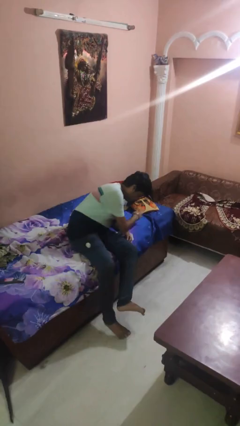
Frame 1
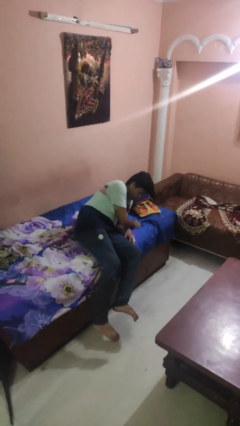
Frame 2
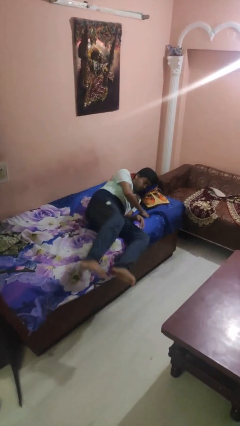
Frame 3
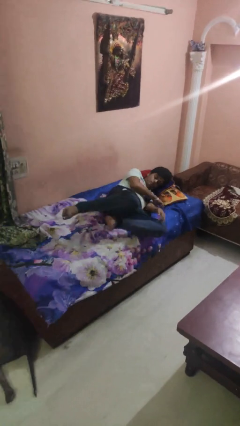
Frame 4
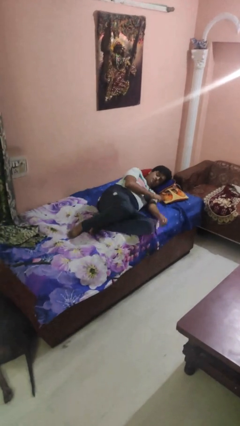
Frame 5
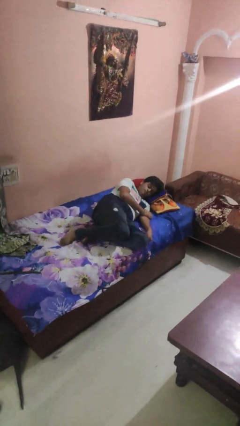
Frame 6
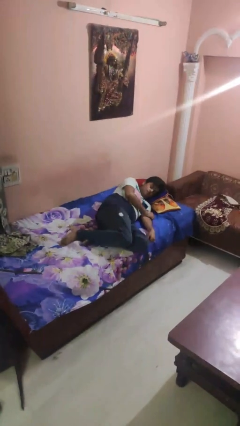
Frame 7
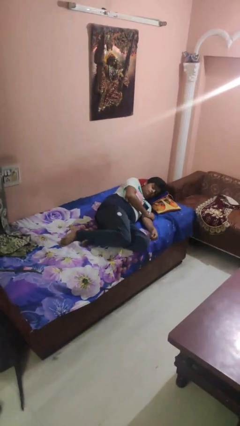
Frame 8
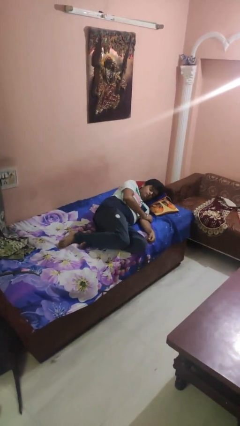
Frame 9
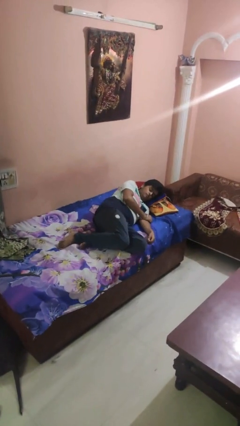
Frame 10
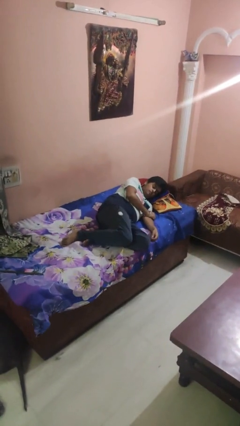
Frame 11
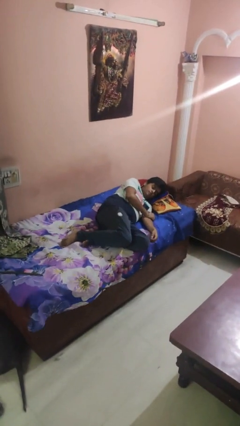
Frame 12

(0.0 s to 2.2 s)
person lies down on bed

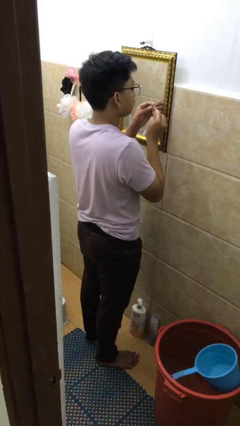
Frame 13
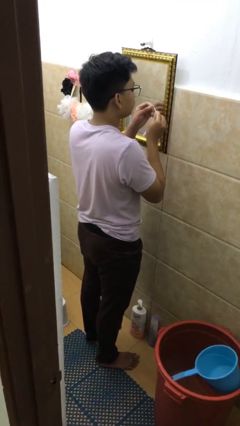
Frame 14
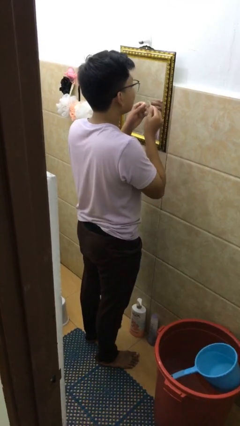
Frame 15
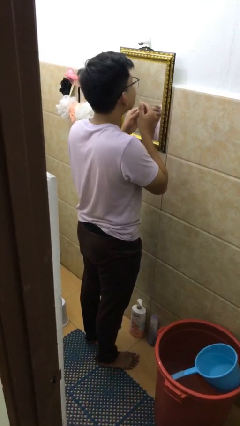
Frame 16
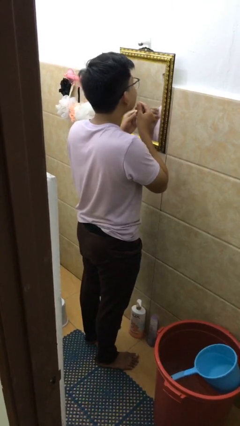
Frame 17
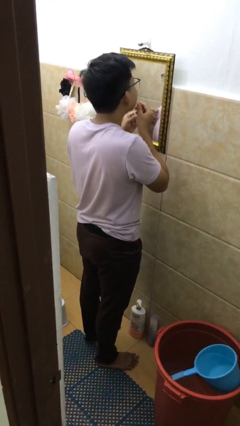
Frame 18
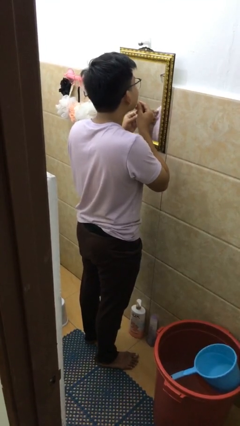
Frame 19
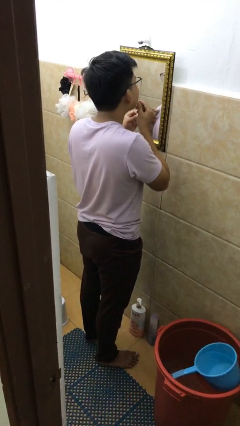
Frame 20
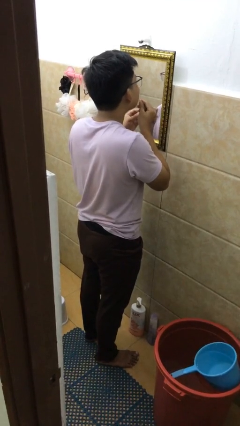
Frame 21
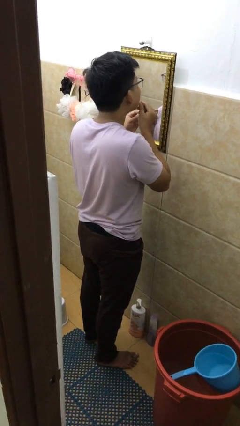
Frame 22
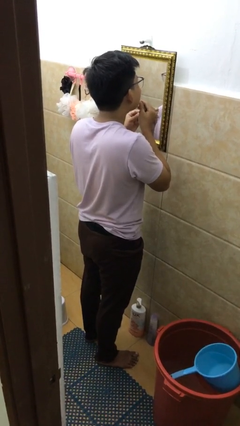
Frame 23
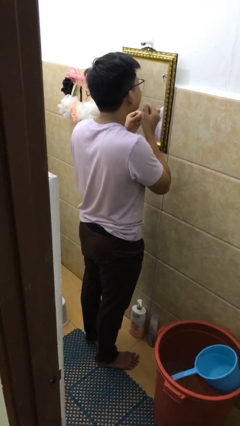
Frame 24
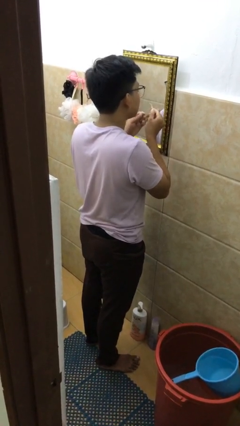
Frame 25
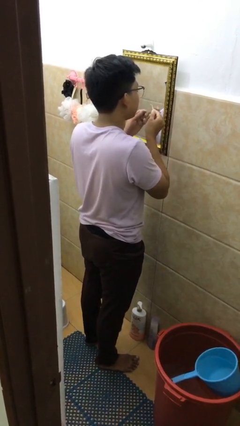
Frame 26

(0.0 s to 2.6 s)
person flosses

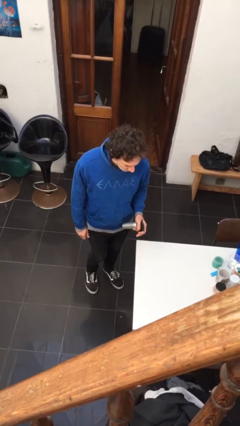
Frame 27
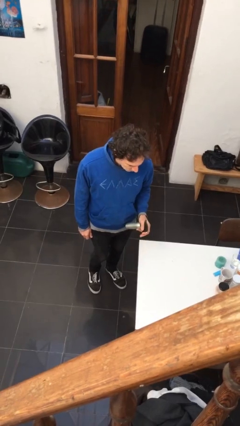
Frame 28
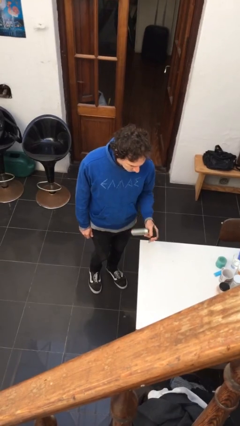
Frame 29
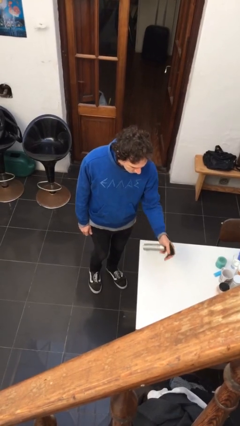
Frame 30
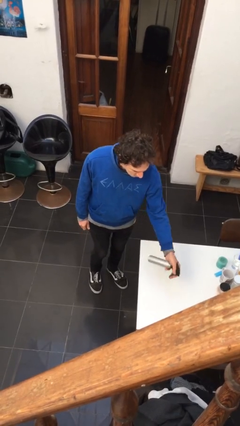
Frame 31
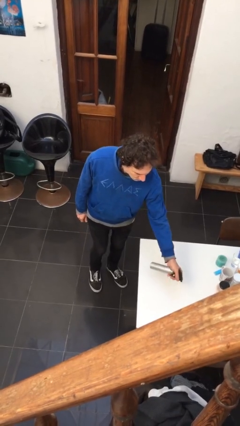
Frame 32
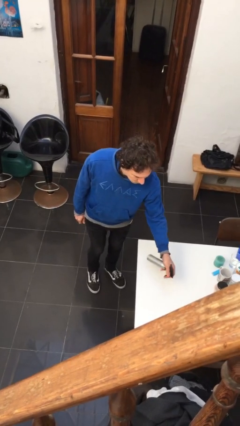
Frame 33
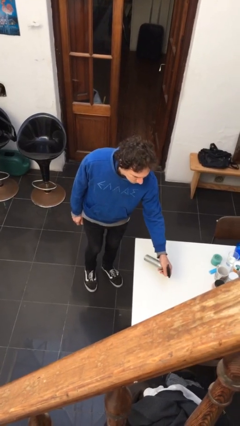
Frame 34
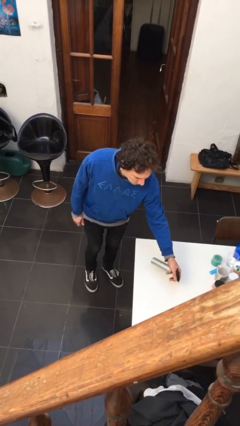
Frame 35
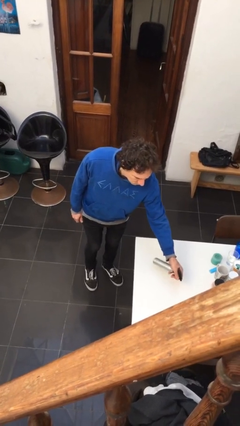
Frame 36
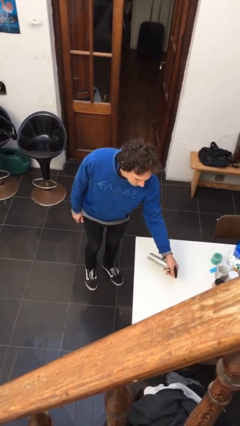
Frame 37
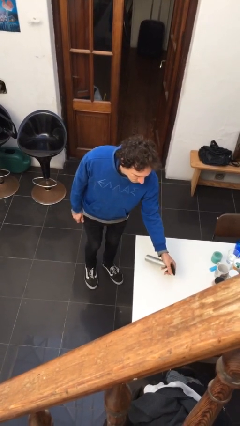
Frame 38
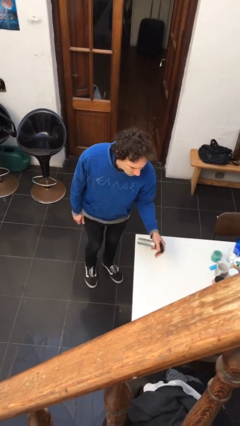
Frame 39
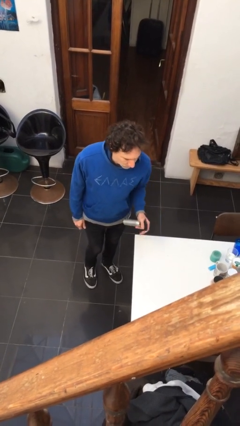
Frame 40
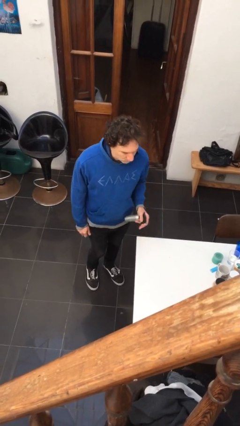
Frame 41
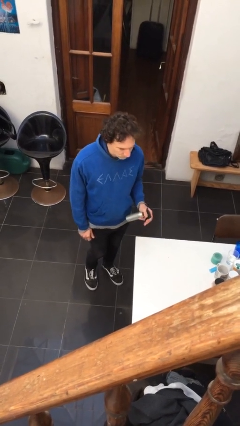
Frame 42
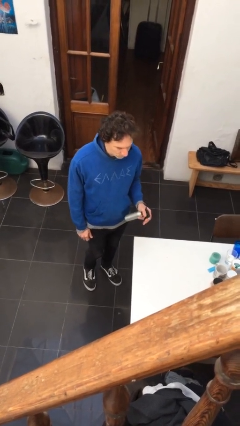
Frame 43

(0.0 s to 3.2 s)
person sprays from bottle

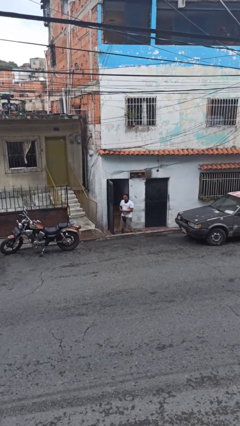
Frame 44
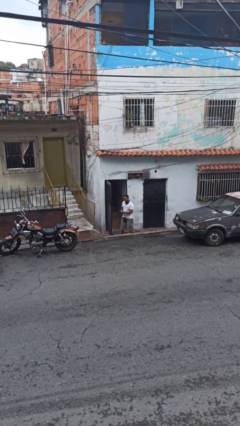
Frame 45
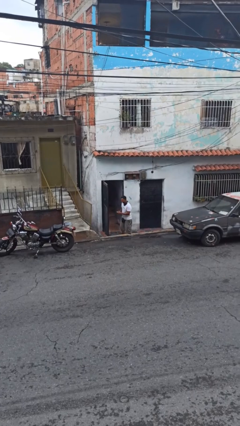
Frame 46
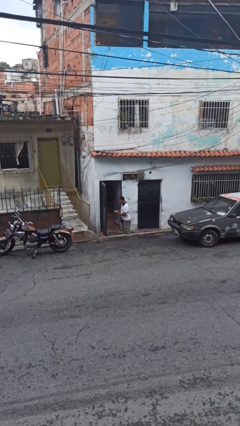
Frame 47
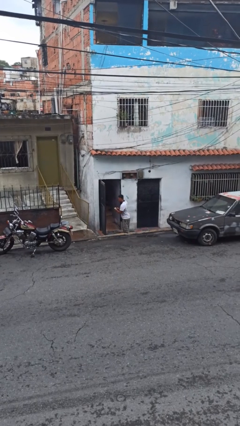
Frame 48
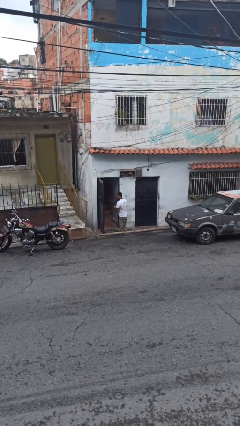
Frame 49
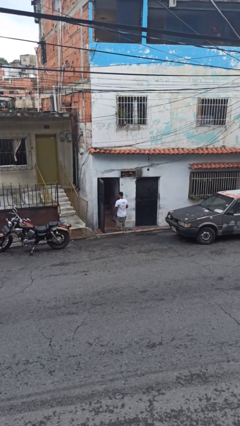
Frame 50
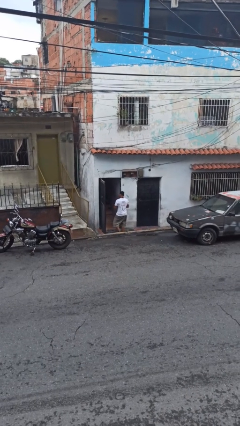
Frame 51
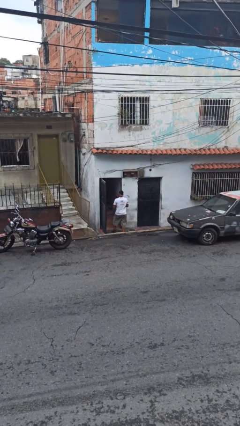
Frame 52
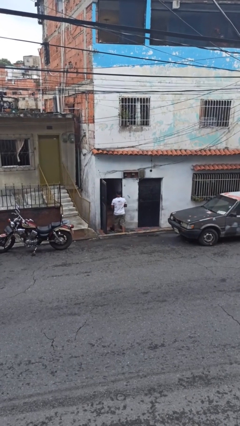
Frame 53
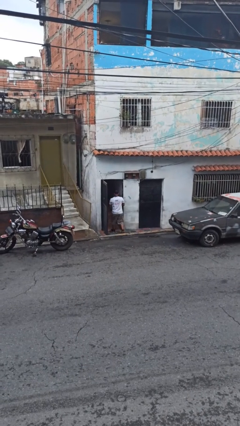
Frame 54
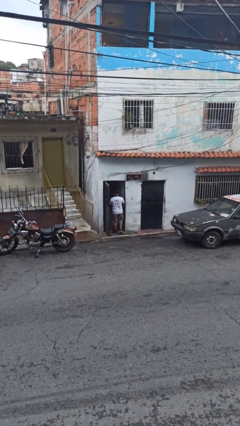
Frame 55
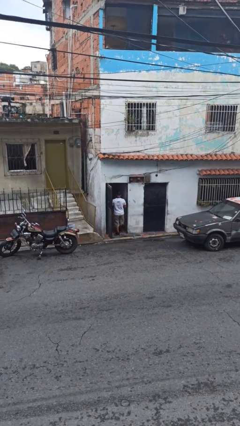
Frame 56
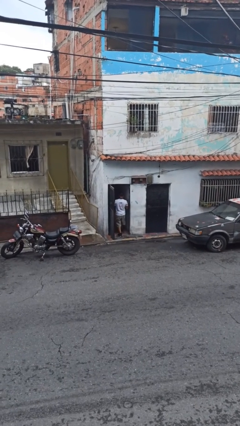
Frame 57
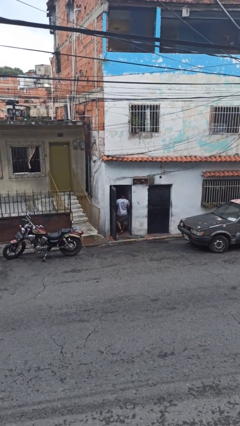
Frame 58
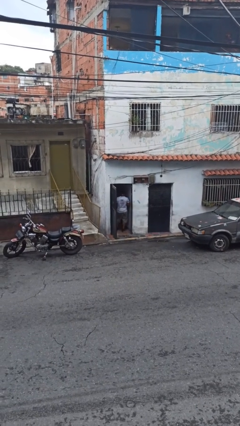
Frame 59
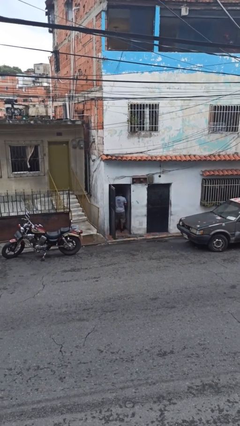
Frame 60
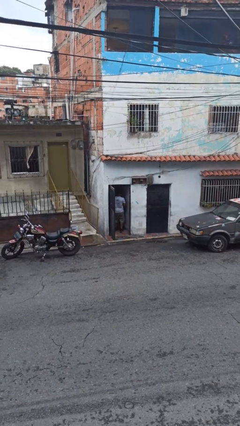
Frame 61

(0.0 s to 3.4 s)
person exits scene through structure

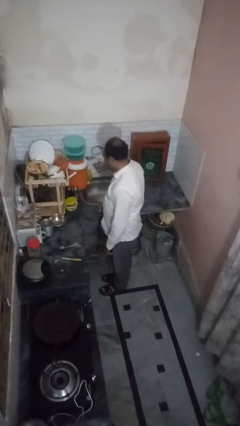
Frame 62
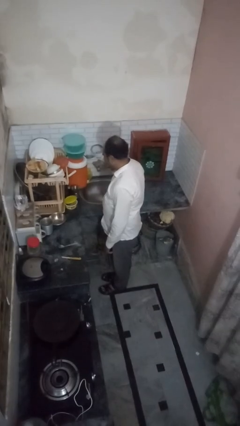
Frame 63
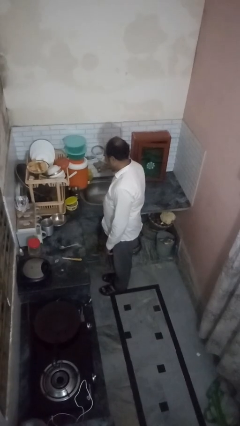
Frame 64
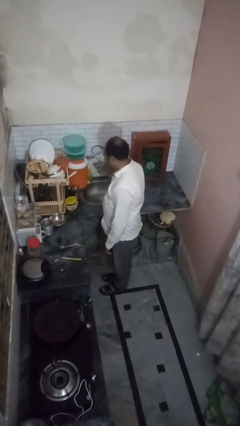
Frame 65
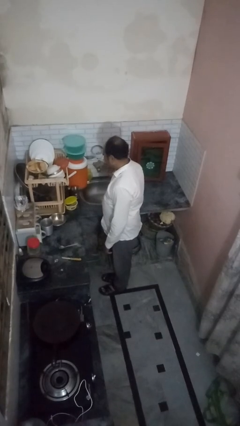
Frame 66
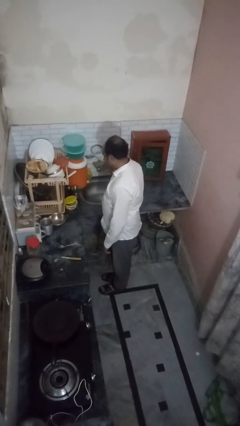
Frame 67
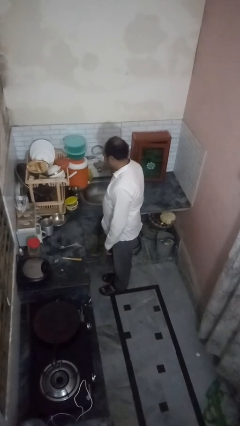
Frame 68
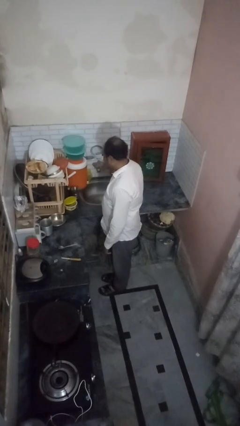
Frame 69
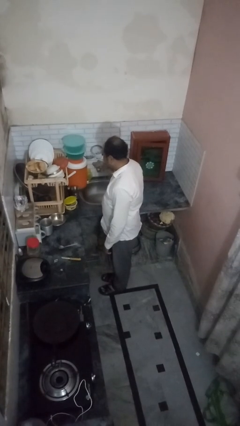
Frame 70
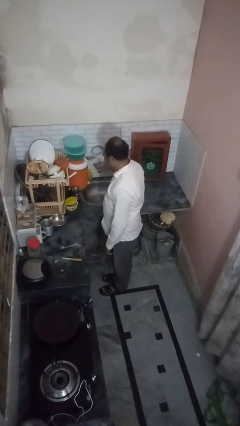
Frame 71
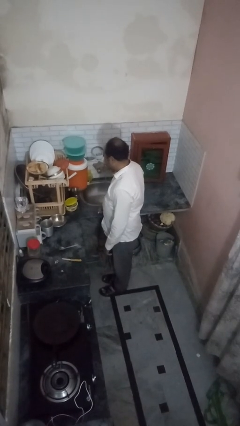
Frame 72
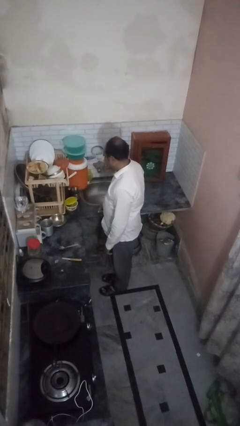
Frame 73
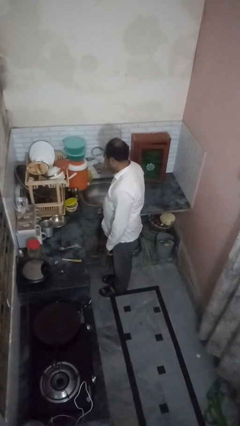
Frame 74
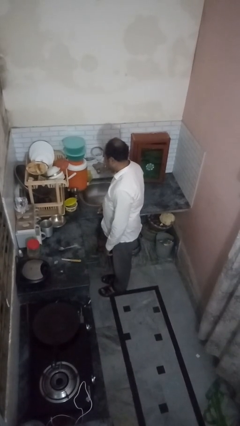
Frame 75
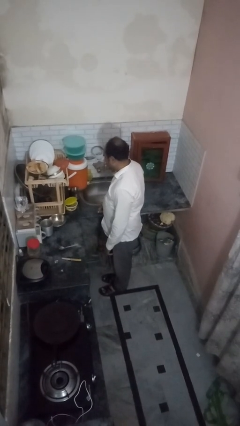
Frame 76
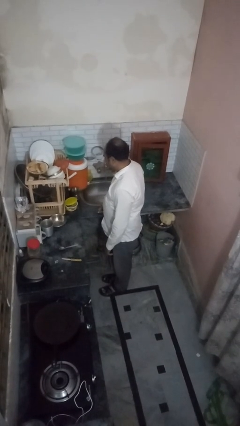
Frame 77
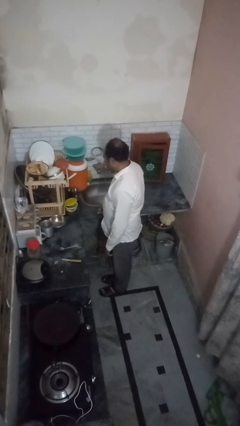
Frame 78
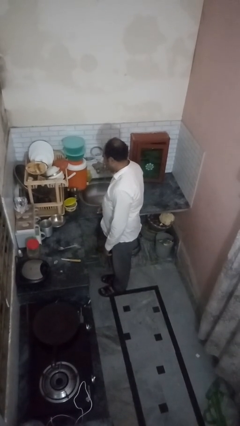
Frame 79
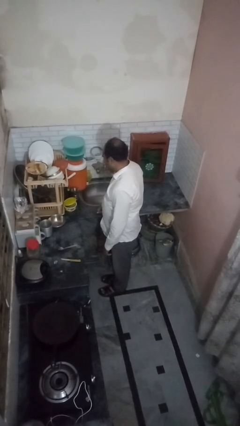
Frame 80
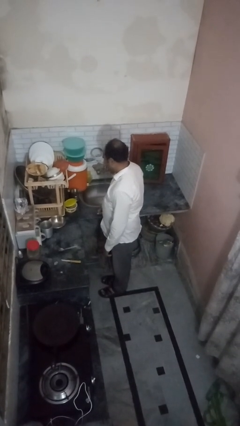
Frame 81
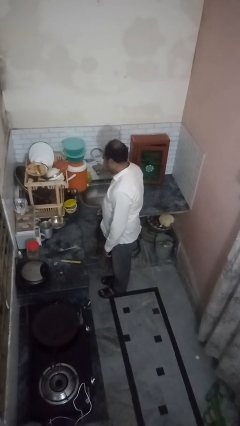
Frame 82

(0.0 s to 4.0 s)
person turns on faucet

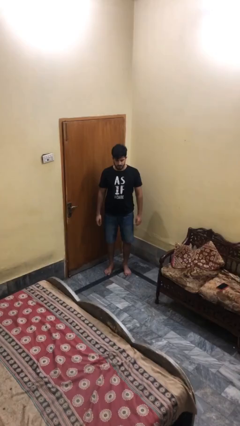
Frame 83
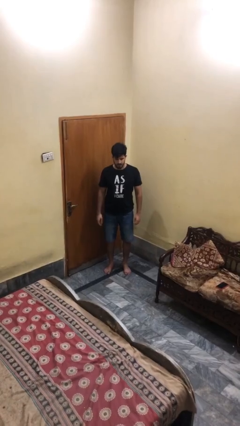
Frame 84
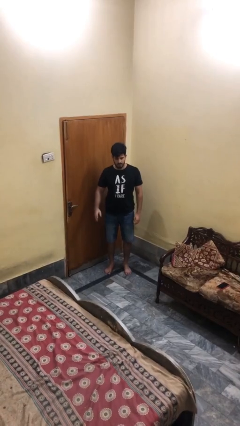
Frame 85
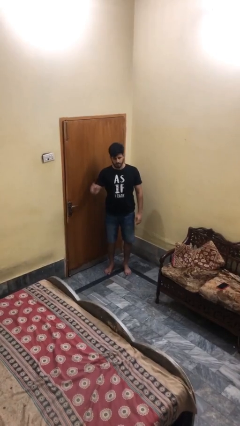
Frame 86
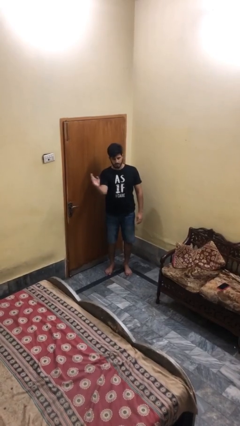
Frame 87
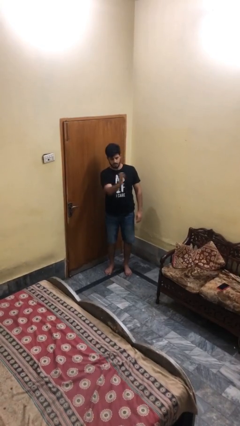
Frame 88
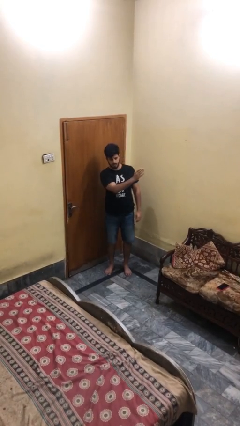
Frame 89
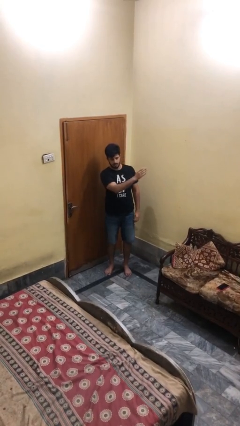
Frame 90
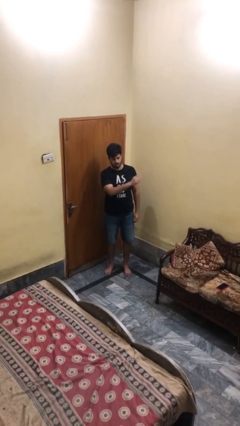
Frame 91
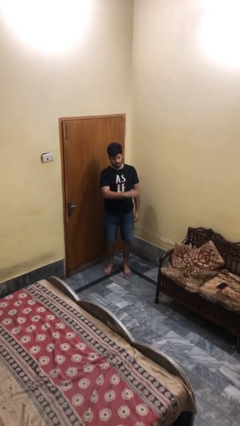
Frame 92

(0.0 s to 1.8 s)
person gestures swipe left
